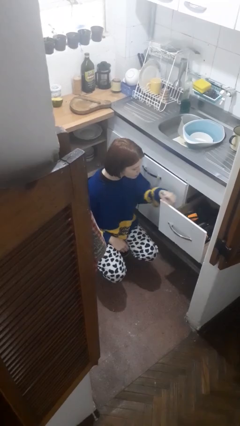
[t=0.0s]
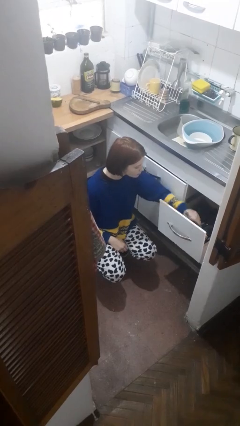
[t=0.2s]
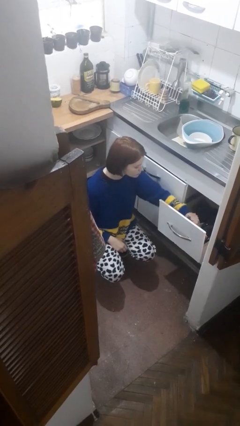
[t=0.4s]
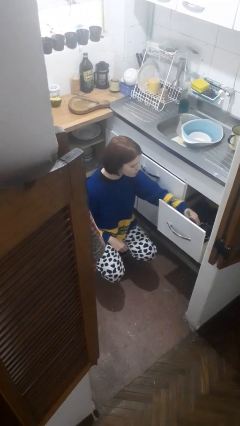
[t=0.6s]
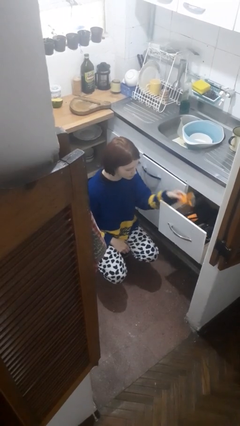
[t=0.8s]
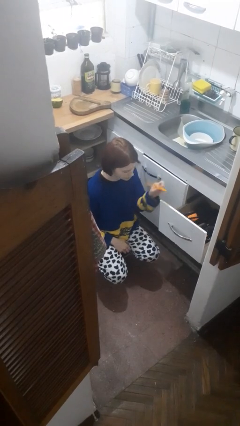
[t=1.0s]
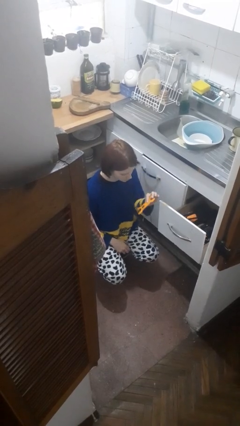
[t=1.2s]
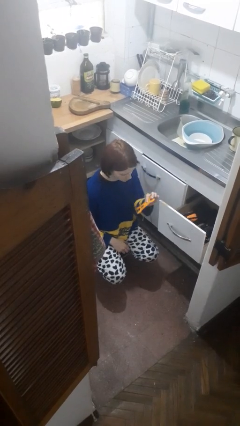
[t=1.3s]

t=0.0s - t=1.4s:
person takes object from kitchen drawer

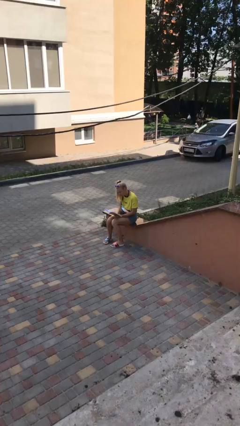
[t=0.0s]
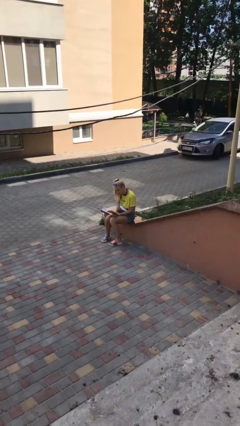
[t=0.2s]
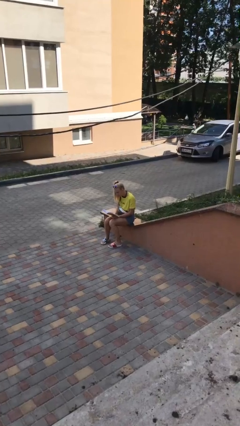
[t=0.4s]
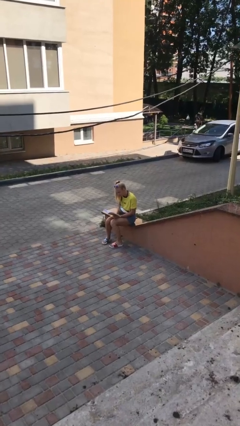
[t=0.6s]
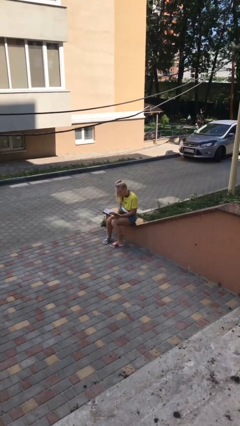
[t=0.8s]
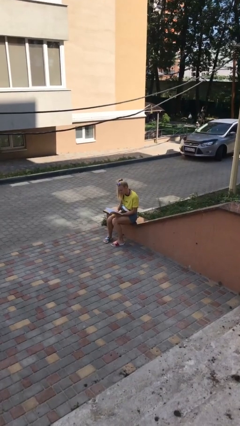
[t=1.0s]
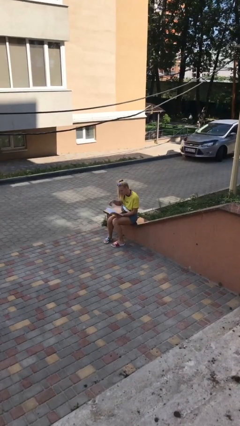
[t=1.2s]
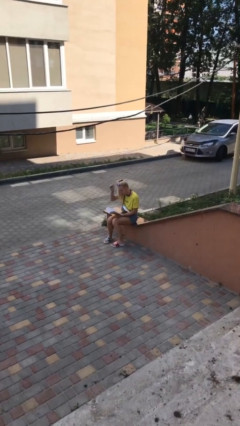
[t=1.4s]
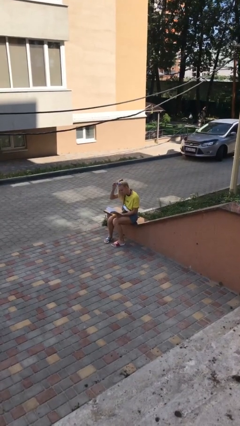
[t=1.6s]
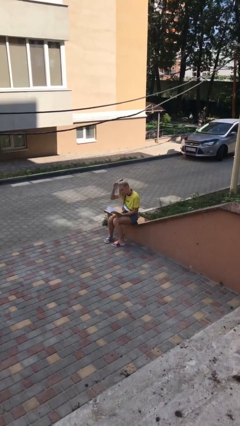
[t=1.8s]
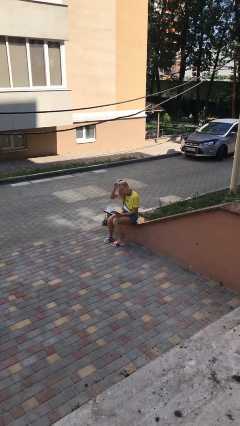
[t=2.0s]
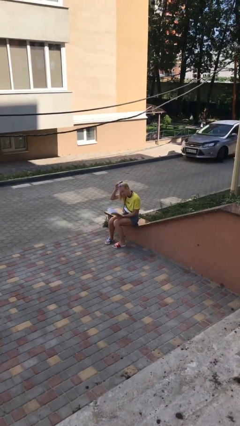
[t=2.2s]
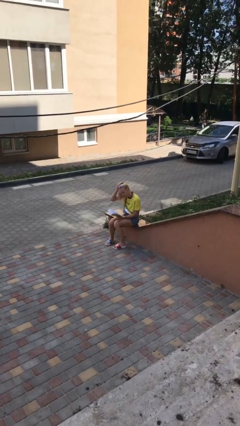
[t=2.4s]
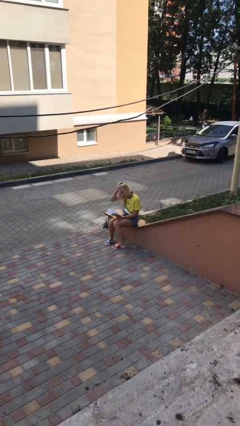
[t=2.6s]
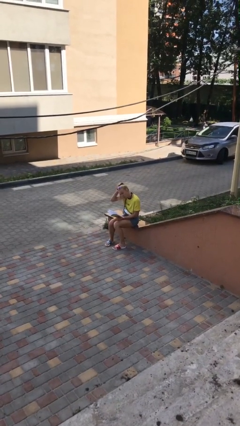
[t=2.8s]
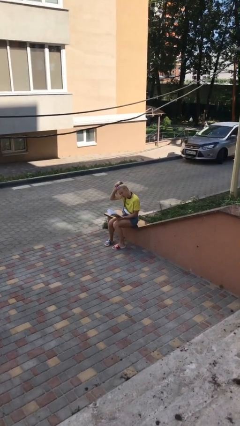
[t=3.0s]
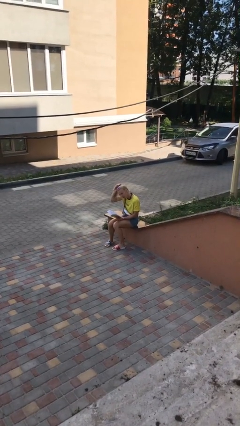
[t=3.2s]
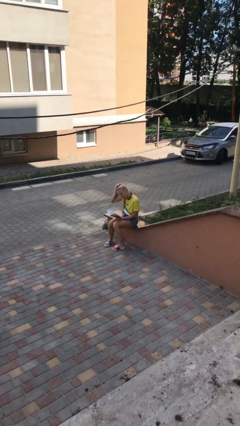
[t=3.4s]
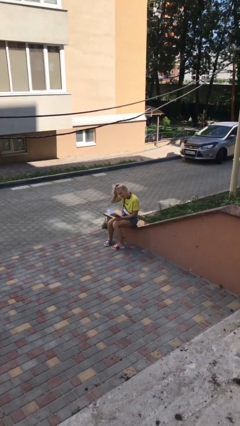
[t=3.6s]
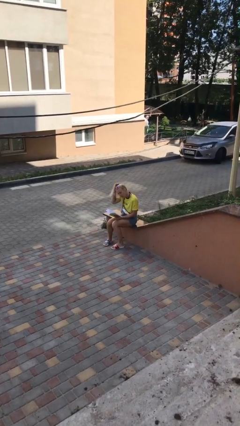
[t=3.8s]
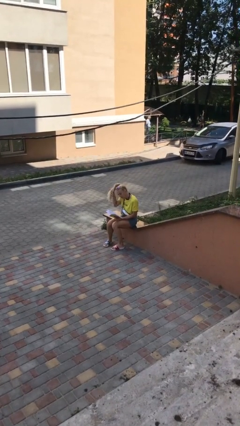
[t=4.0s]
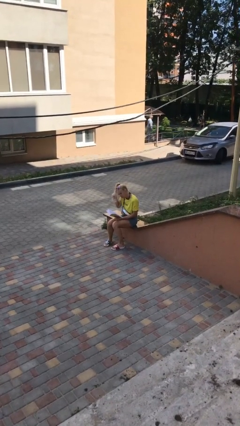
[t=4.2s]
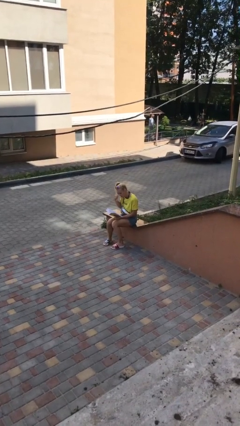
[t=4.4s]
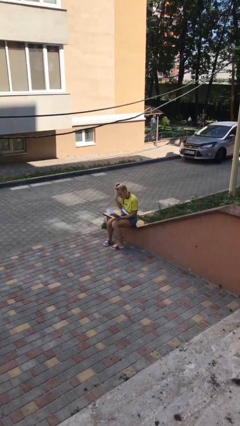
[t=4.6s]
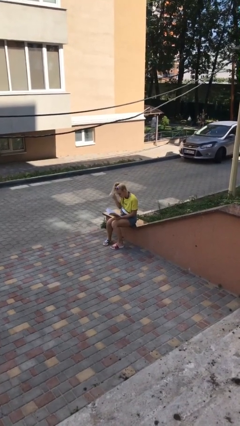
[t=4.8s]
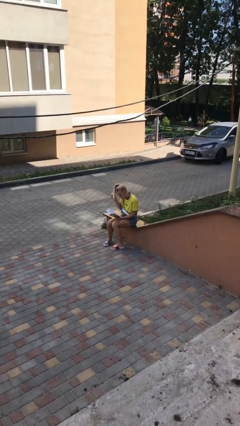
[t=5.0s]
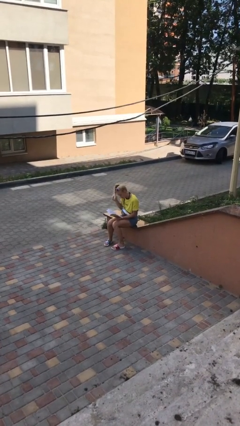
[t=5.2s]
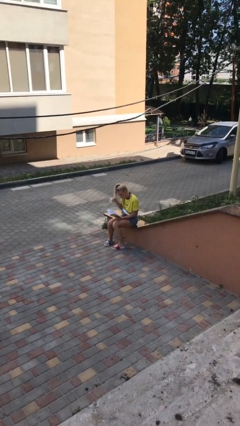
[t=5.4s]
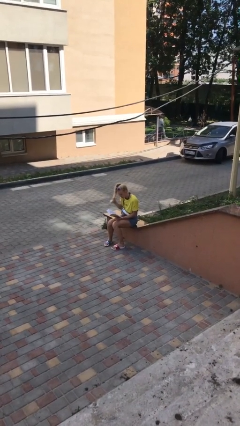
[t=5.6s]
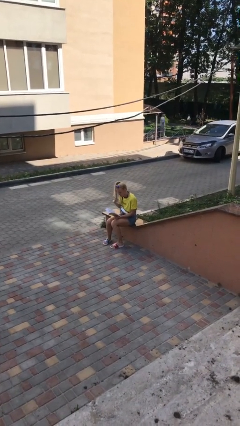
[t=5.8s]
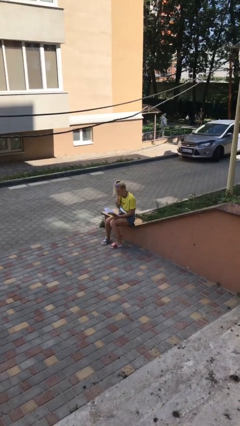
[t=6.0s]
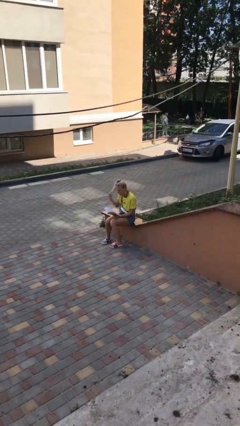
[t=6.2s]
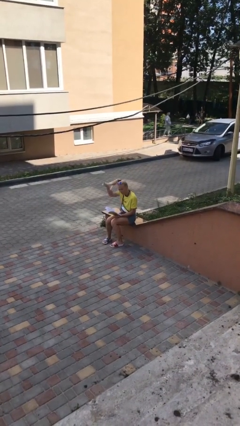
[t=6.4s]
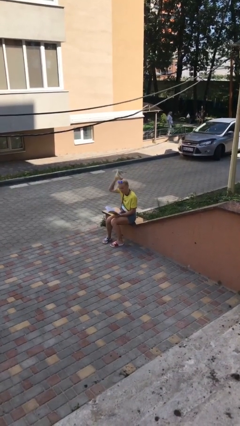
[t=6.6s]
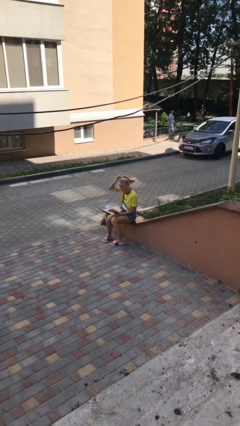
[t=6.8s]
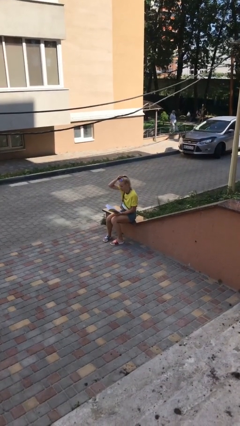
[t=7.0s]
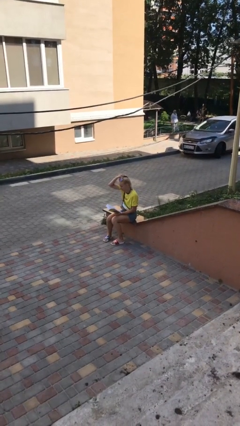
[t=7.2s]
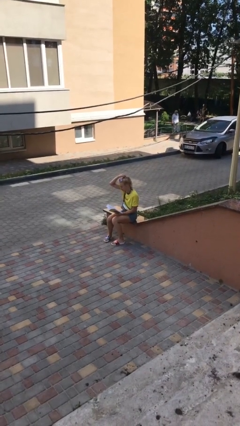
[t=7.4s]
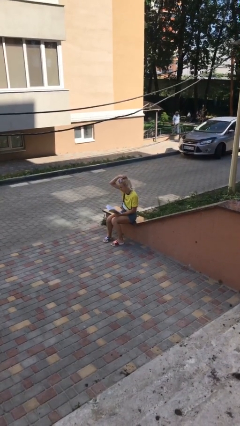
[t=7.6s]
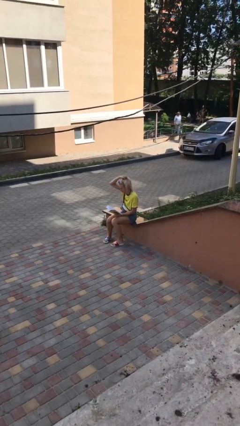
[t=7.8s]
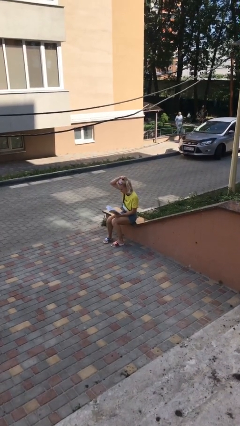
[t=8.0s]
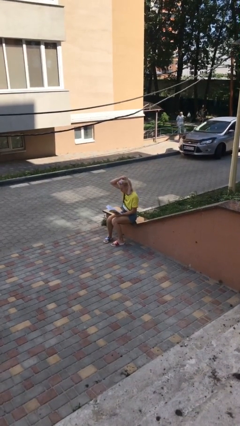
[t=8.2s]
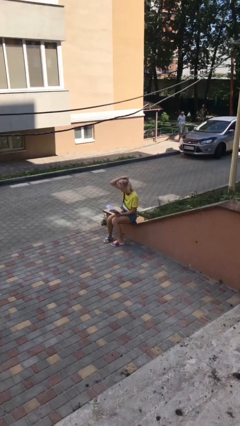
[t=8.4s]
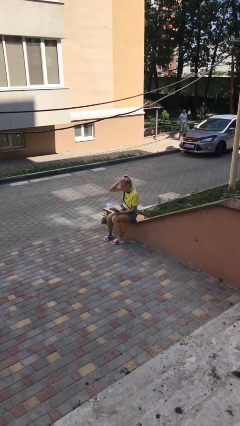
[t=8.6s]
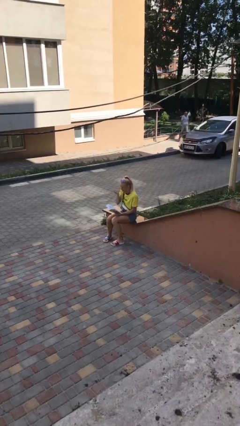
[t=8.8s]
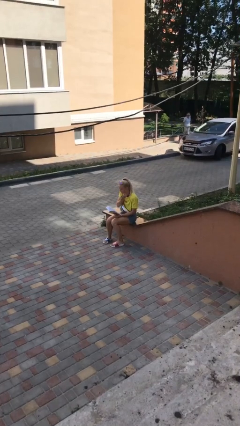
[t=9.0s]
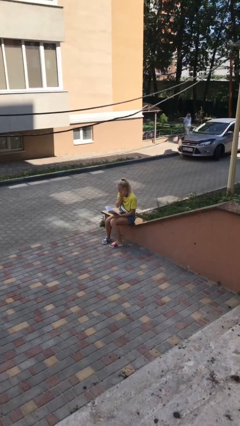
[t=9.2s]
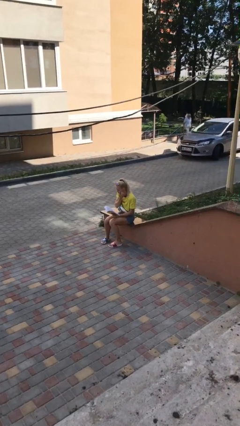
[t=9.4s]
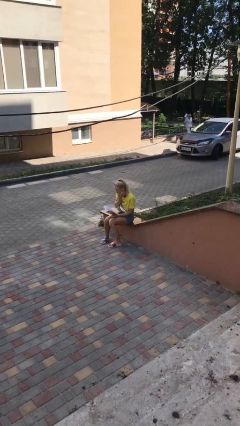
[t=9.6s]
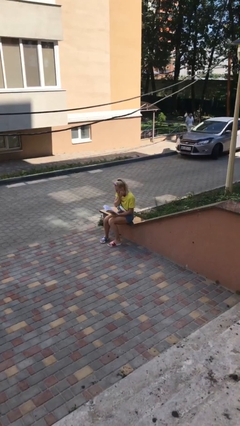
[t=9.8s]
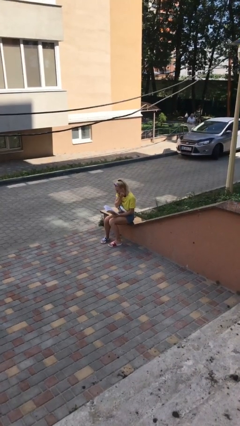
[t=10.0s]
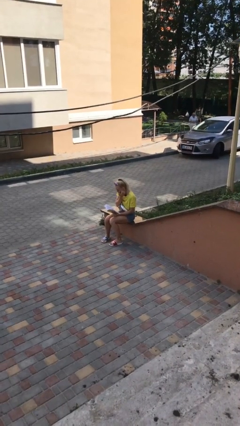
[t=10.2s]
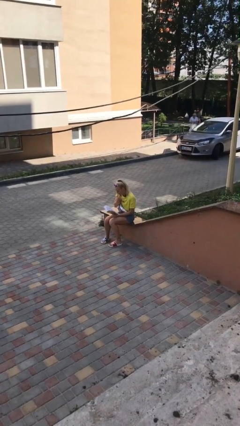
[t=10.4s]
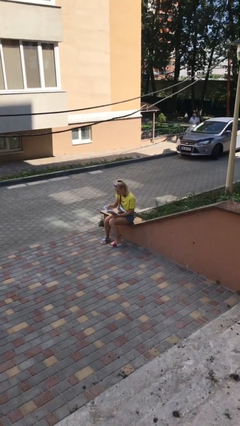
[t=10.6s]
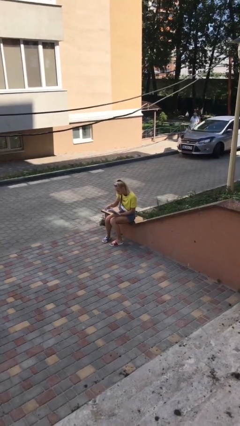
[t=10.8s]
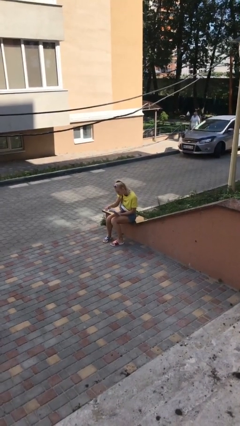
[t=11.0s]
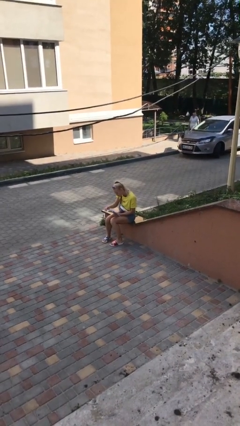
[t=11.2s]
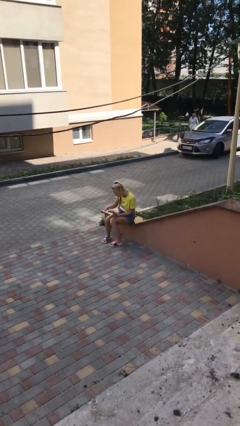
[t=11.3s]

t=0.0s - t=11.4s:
person reads document

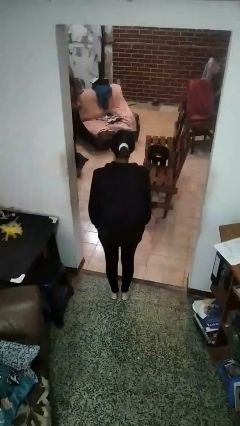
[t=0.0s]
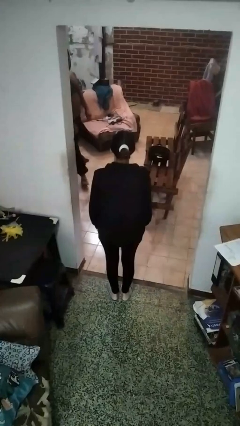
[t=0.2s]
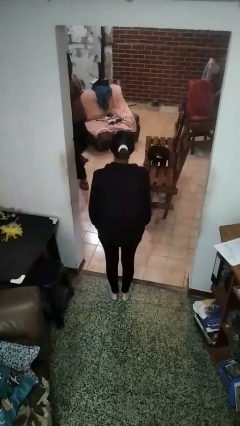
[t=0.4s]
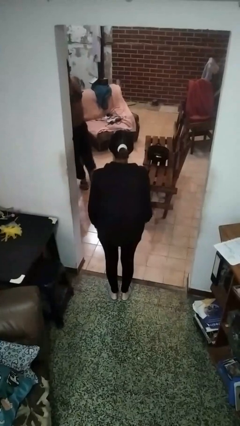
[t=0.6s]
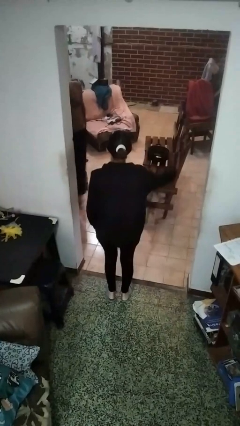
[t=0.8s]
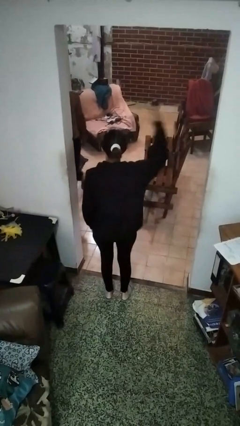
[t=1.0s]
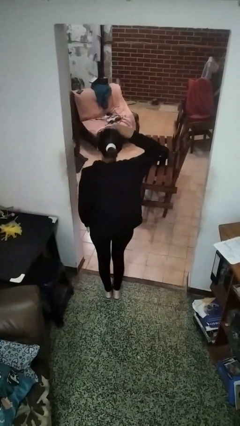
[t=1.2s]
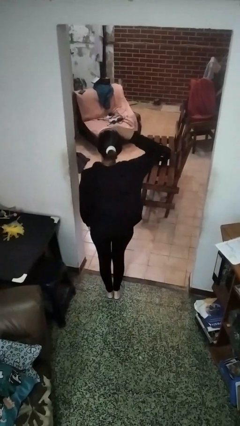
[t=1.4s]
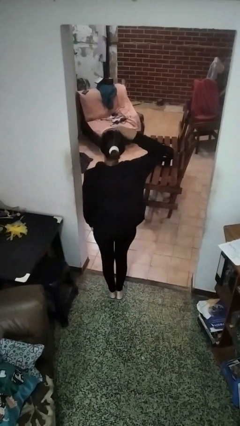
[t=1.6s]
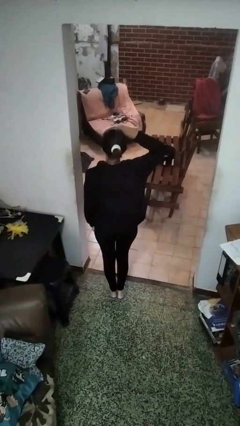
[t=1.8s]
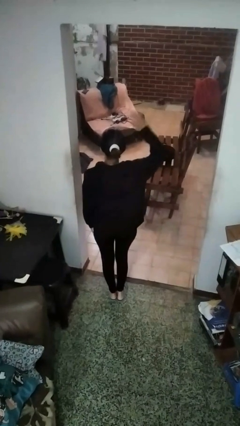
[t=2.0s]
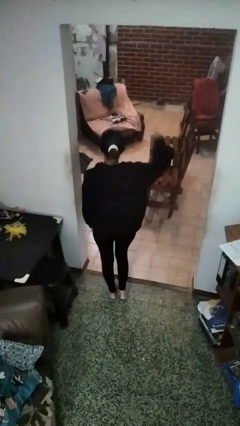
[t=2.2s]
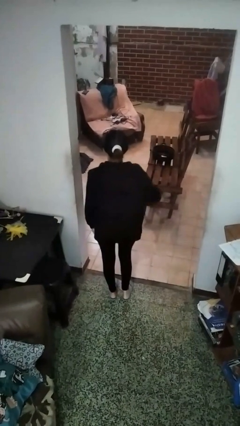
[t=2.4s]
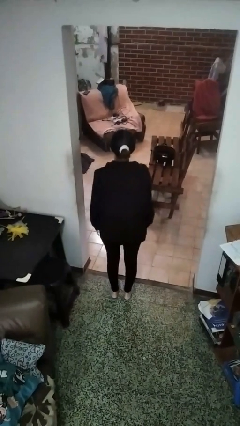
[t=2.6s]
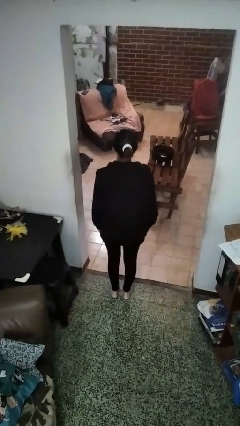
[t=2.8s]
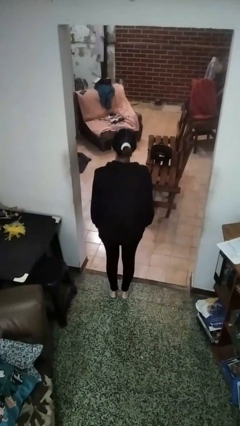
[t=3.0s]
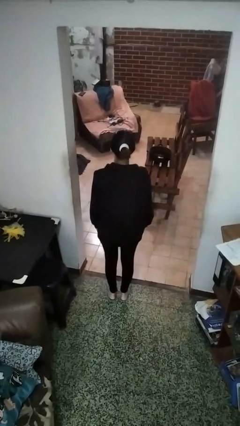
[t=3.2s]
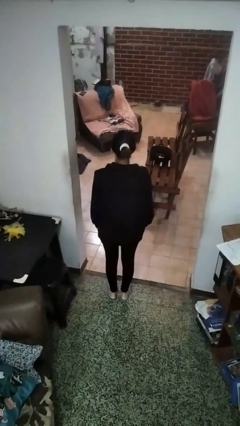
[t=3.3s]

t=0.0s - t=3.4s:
person salutes

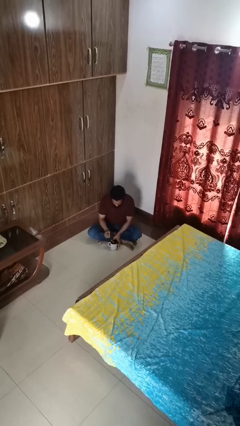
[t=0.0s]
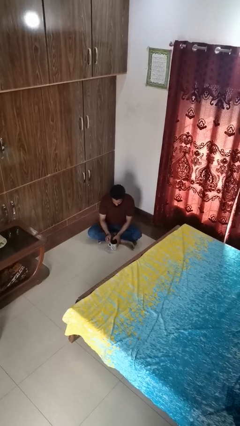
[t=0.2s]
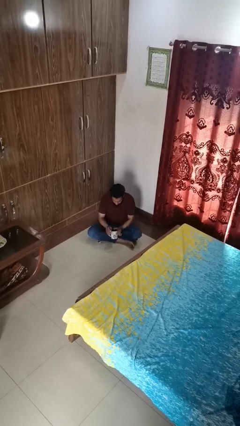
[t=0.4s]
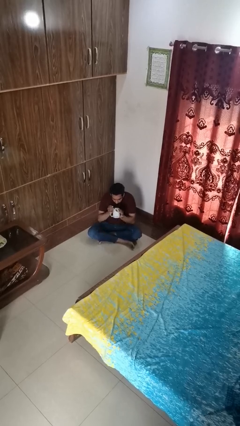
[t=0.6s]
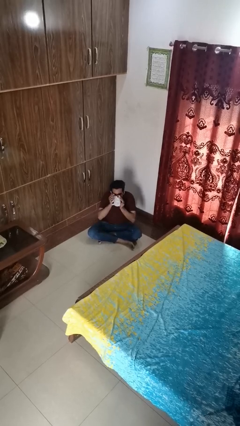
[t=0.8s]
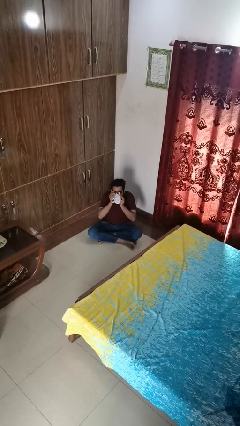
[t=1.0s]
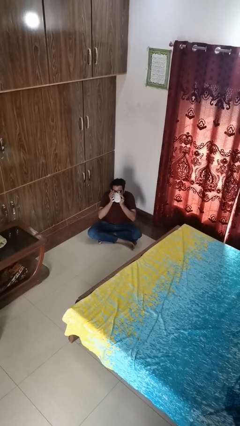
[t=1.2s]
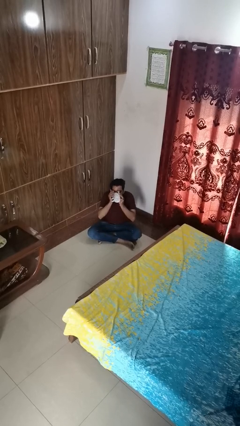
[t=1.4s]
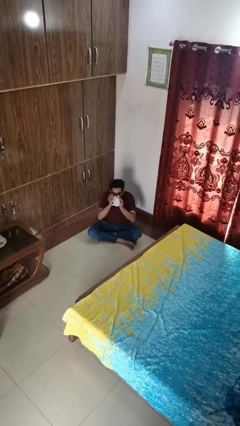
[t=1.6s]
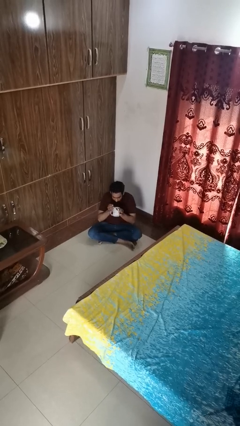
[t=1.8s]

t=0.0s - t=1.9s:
person drinks from mug
